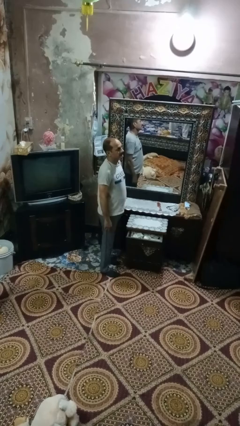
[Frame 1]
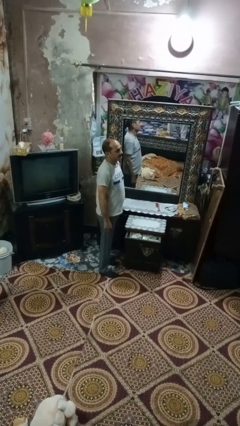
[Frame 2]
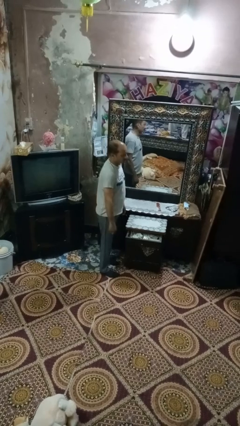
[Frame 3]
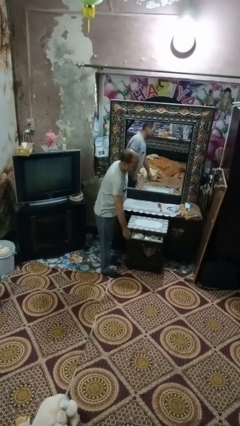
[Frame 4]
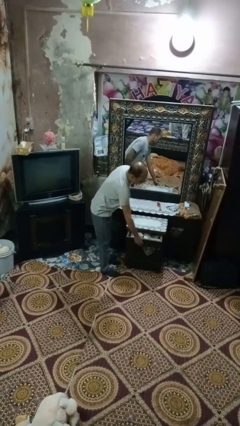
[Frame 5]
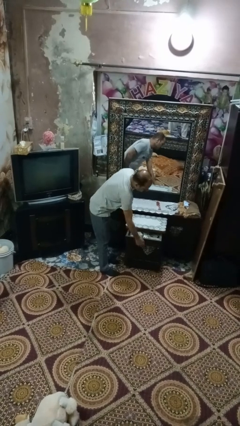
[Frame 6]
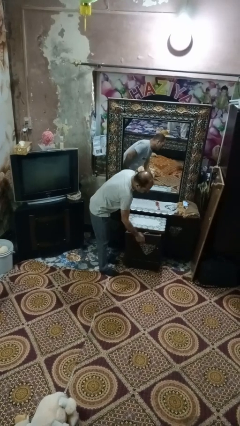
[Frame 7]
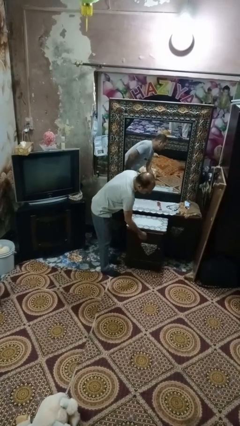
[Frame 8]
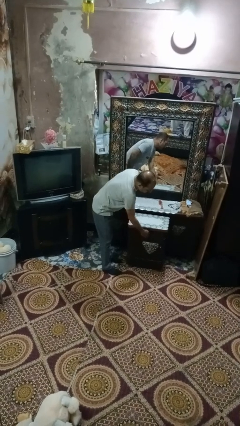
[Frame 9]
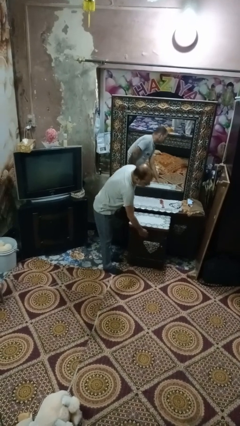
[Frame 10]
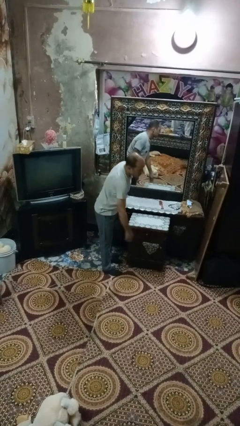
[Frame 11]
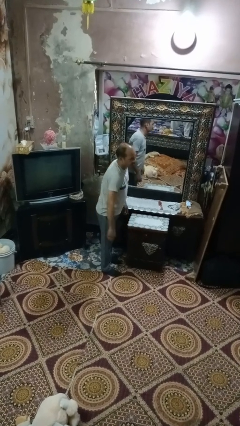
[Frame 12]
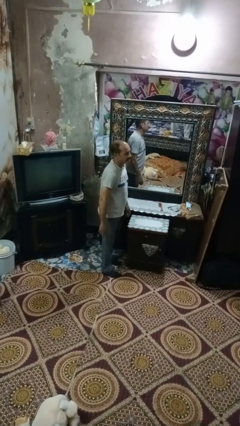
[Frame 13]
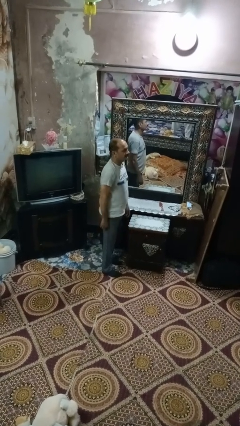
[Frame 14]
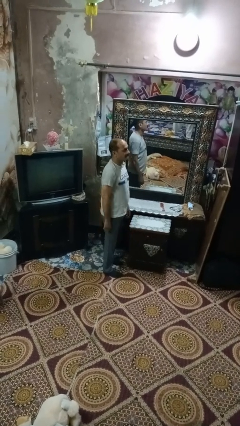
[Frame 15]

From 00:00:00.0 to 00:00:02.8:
person closes dresser drawer

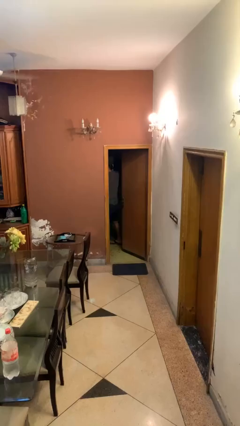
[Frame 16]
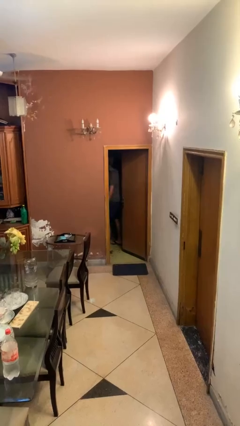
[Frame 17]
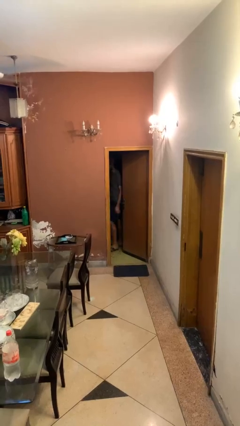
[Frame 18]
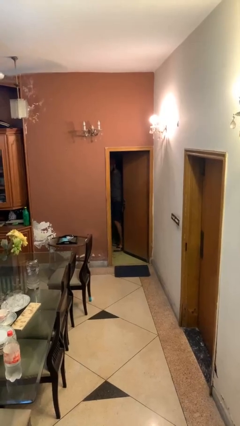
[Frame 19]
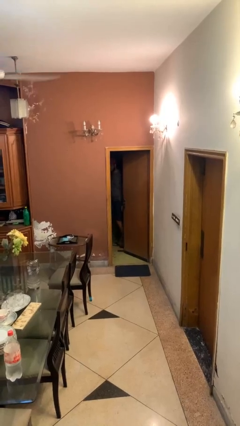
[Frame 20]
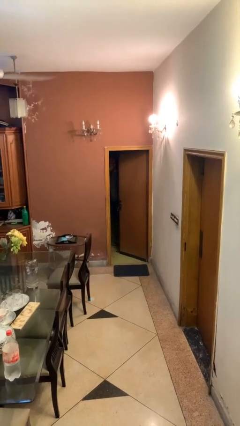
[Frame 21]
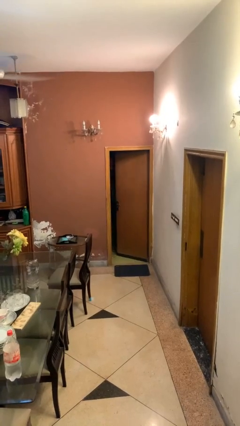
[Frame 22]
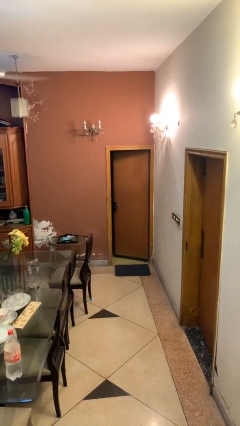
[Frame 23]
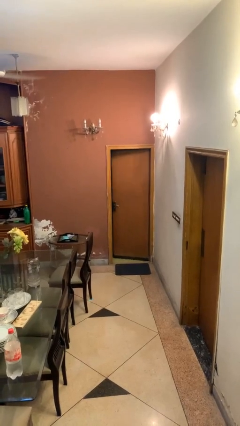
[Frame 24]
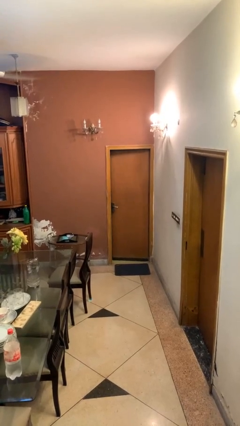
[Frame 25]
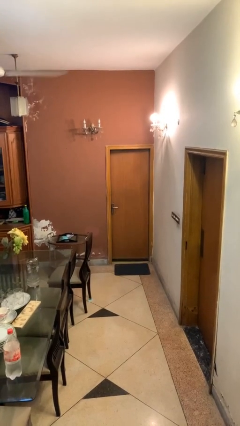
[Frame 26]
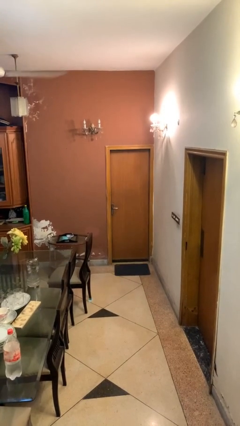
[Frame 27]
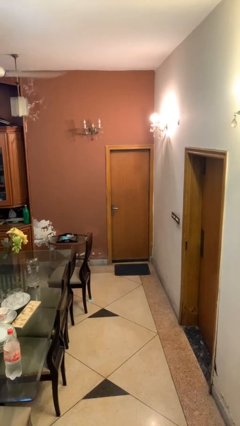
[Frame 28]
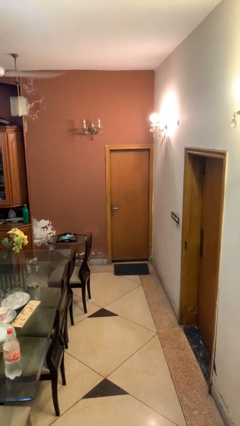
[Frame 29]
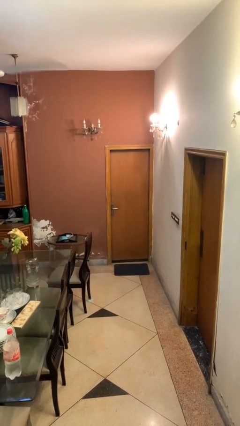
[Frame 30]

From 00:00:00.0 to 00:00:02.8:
person closes facility door

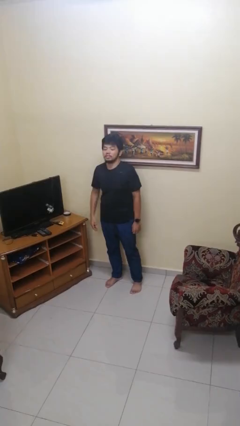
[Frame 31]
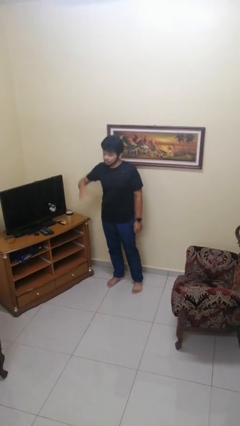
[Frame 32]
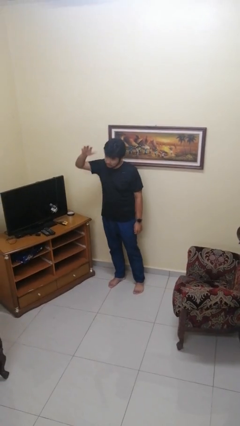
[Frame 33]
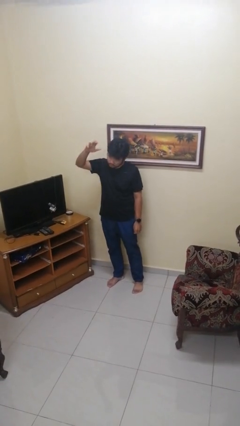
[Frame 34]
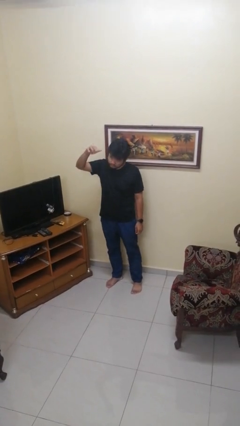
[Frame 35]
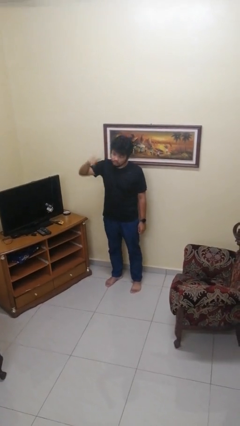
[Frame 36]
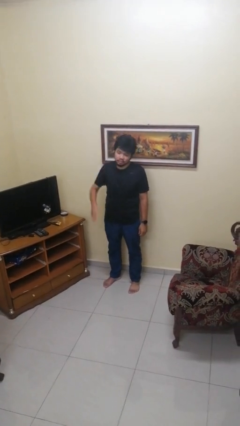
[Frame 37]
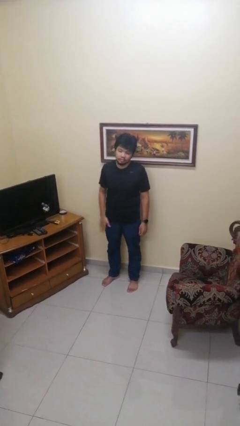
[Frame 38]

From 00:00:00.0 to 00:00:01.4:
person gestures come here

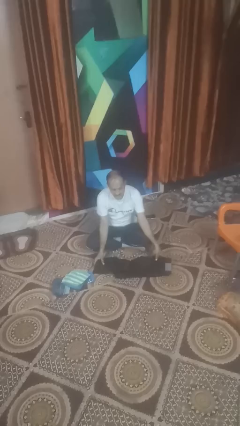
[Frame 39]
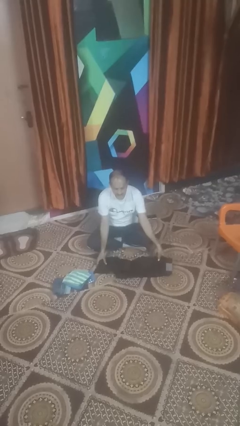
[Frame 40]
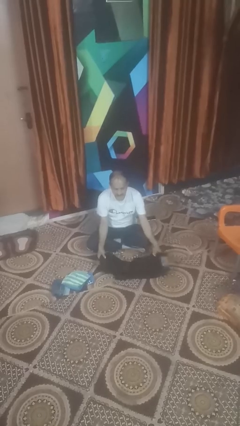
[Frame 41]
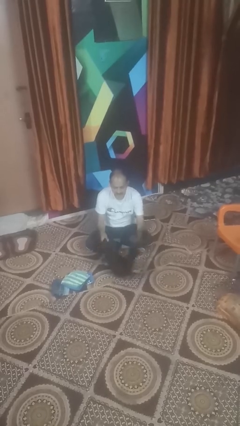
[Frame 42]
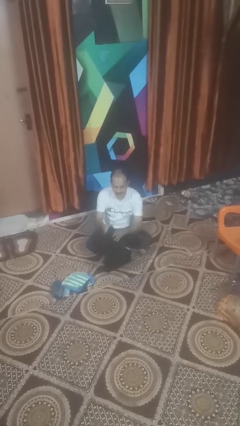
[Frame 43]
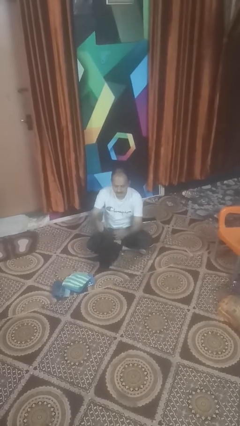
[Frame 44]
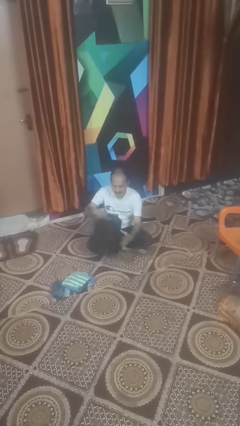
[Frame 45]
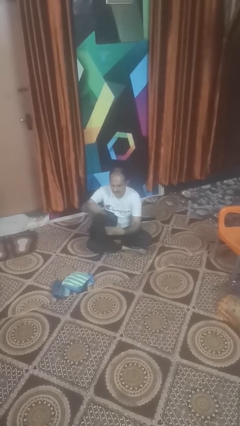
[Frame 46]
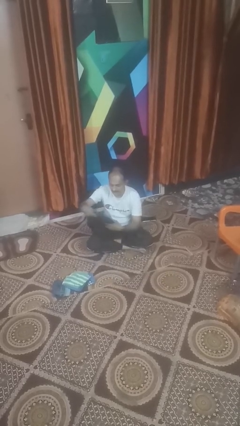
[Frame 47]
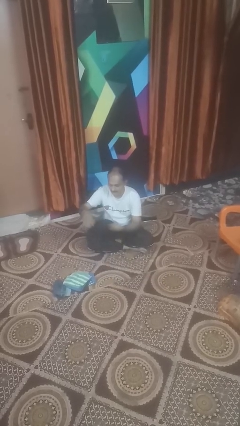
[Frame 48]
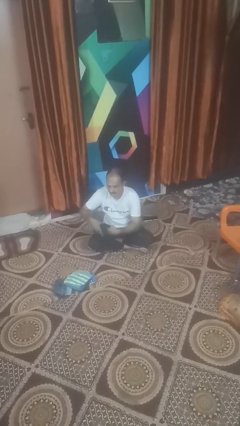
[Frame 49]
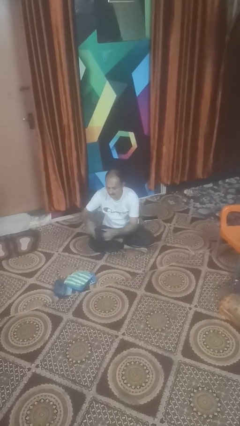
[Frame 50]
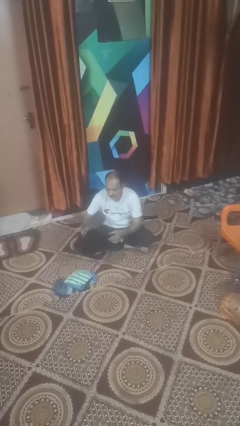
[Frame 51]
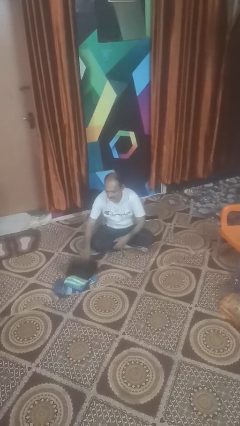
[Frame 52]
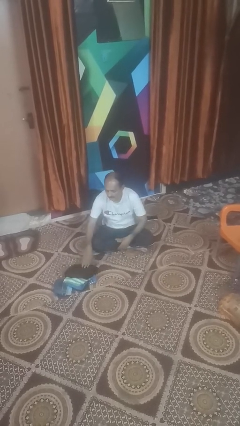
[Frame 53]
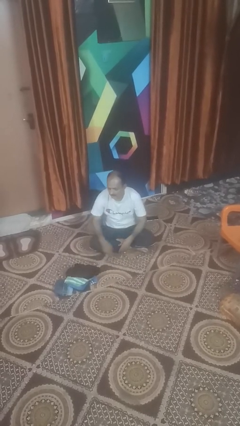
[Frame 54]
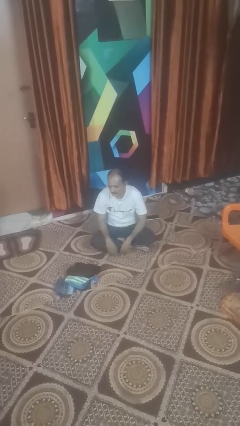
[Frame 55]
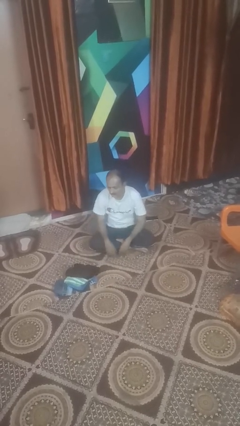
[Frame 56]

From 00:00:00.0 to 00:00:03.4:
person folds pants

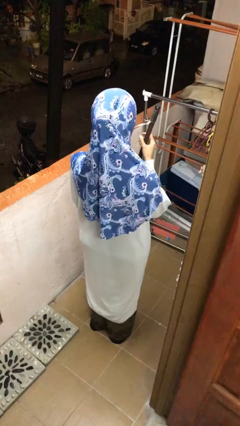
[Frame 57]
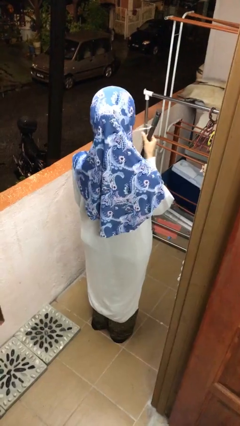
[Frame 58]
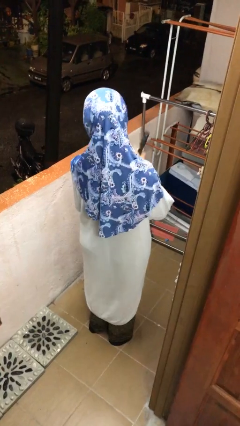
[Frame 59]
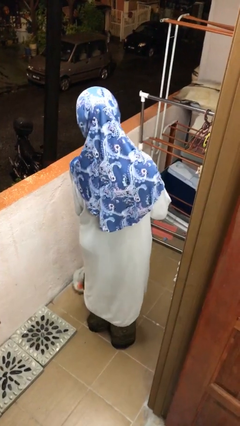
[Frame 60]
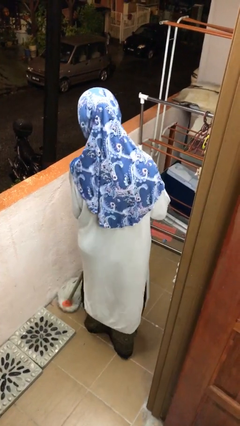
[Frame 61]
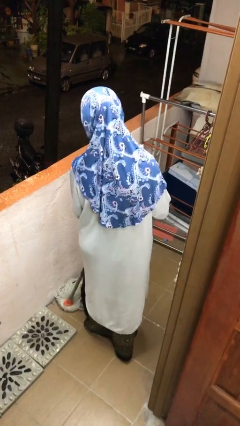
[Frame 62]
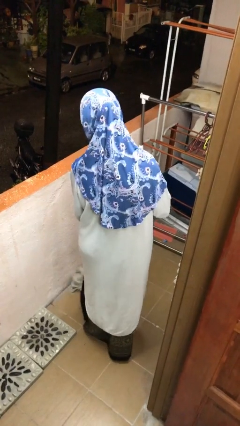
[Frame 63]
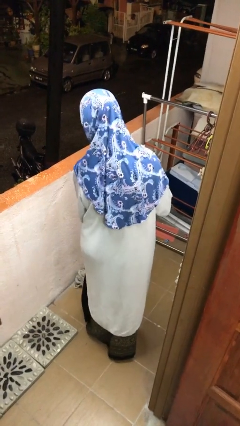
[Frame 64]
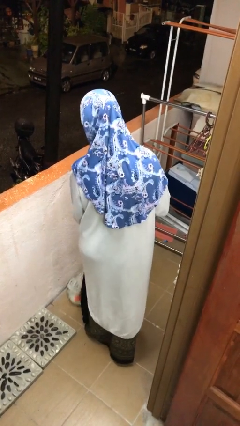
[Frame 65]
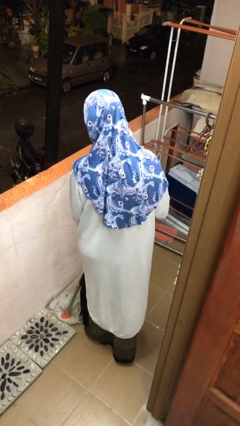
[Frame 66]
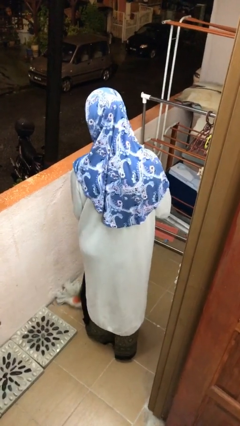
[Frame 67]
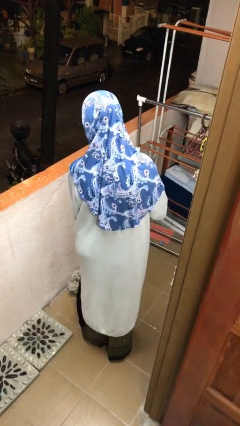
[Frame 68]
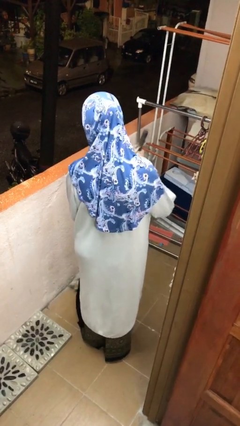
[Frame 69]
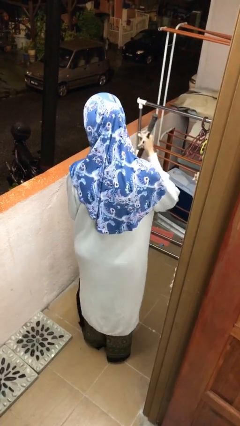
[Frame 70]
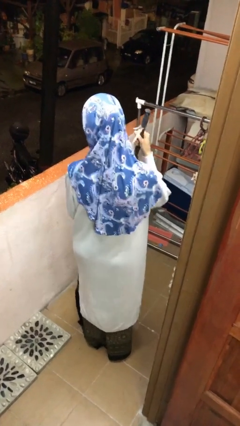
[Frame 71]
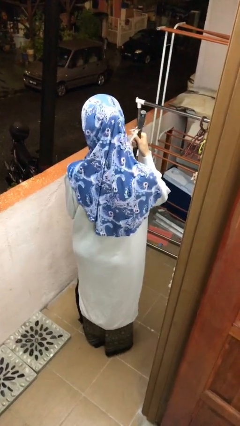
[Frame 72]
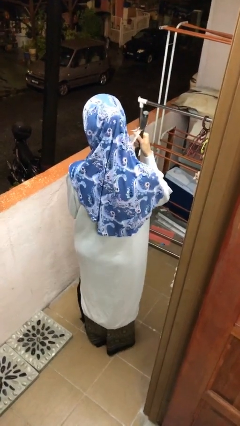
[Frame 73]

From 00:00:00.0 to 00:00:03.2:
person mops

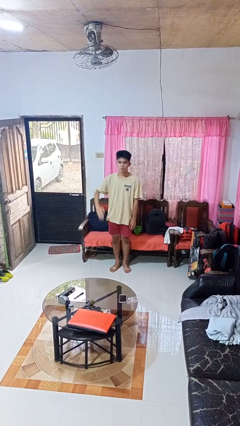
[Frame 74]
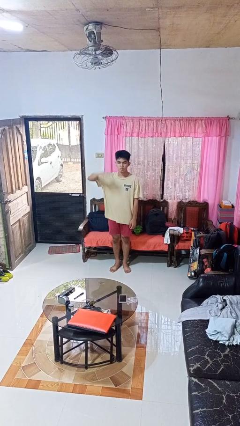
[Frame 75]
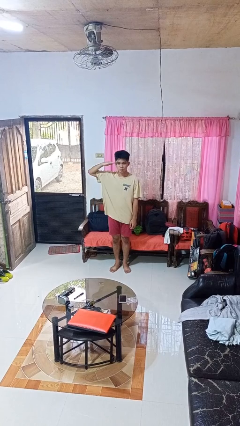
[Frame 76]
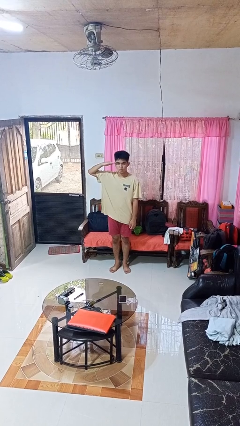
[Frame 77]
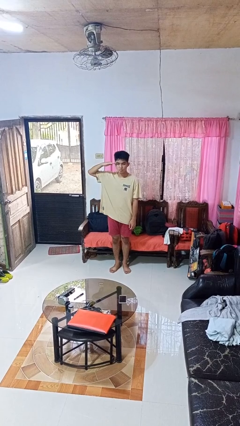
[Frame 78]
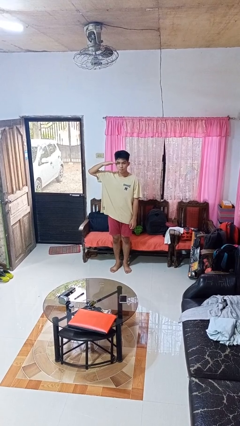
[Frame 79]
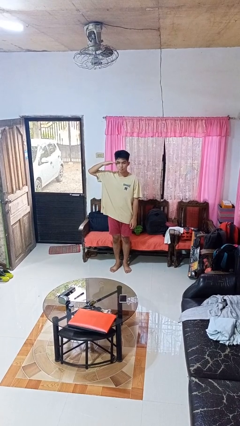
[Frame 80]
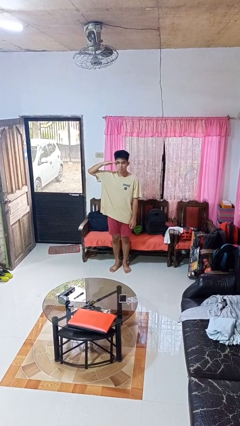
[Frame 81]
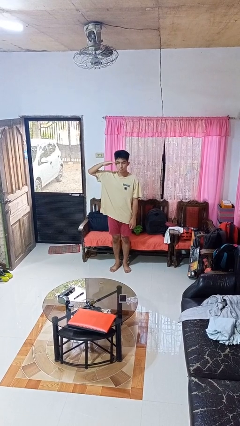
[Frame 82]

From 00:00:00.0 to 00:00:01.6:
person salutes

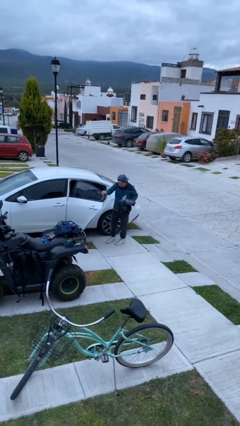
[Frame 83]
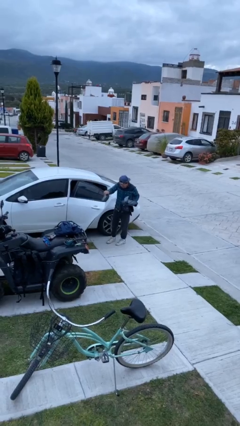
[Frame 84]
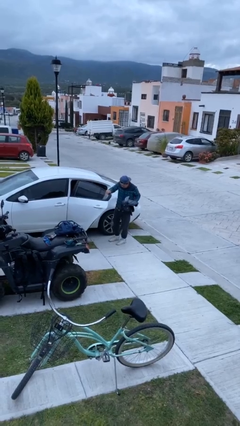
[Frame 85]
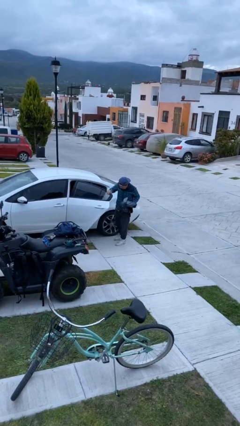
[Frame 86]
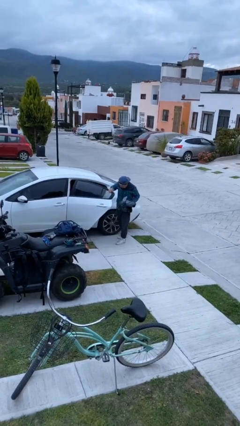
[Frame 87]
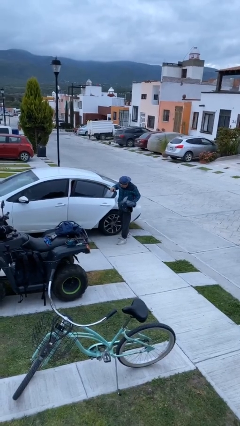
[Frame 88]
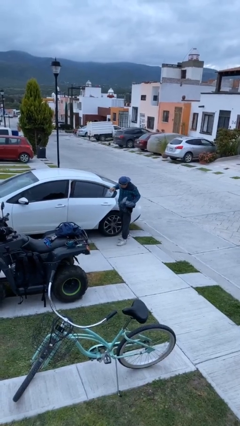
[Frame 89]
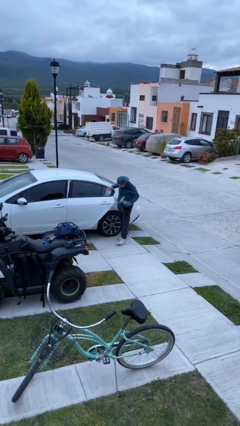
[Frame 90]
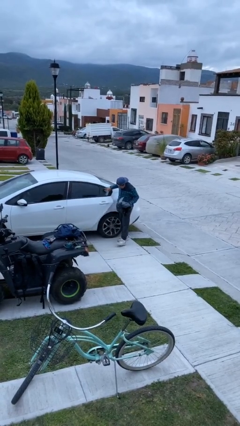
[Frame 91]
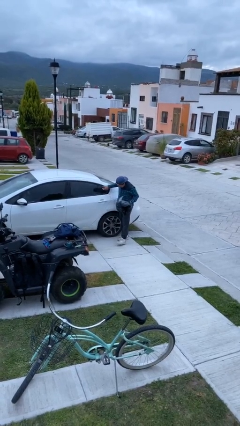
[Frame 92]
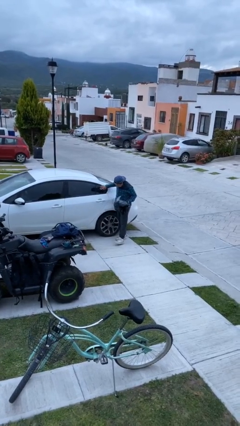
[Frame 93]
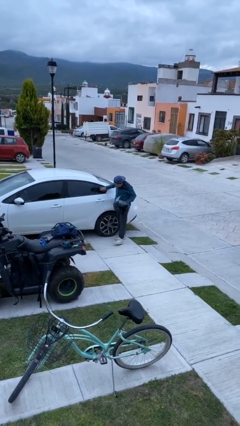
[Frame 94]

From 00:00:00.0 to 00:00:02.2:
person closes car door
